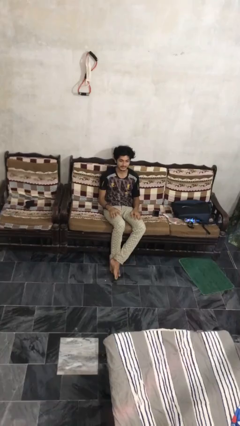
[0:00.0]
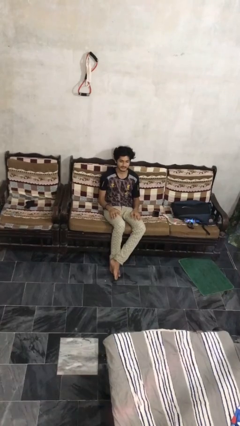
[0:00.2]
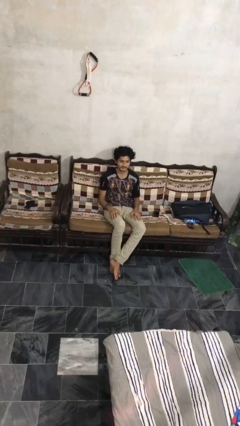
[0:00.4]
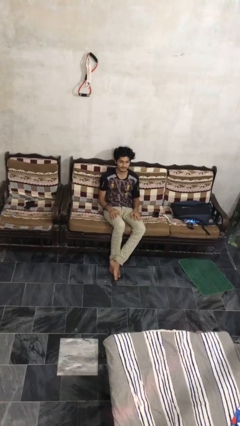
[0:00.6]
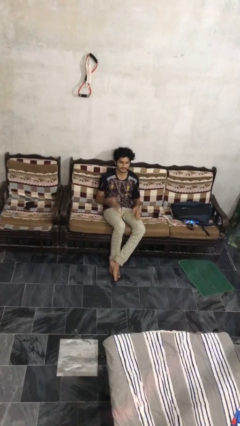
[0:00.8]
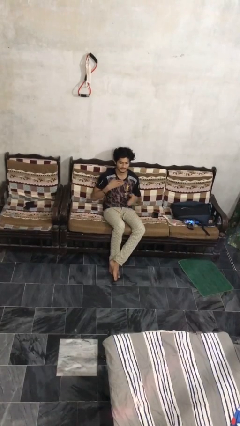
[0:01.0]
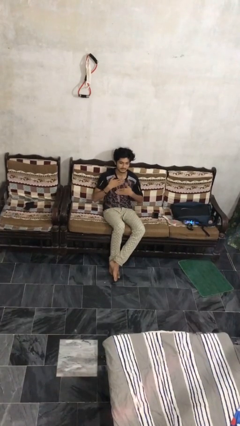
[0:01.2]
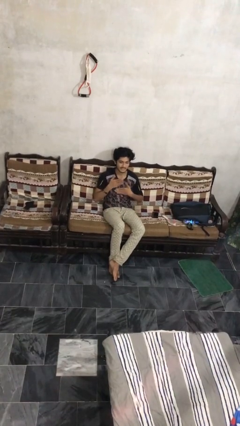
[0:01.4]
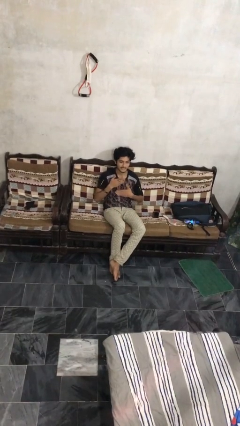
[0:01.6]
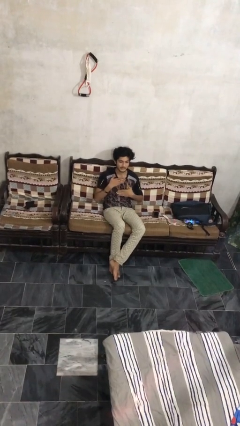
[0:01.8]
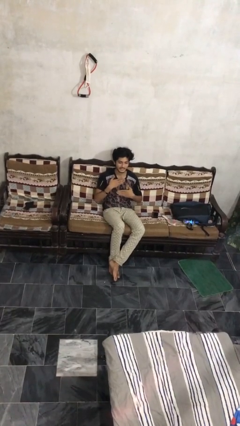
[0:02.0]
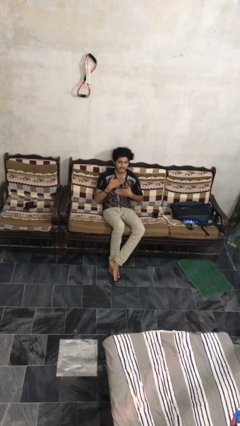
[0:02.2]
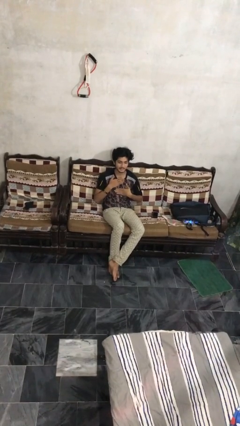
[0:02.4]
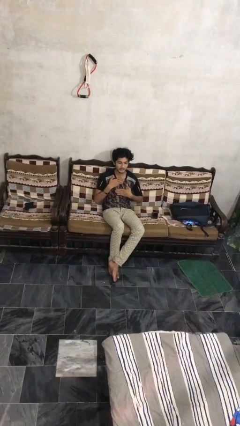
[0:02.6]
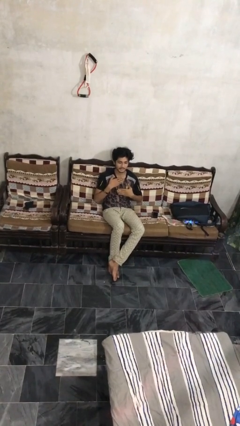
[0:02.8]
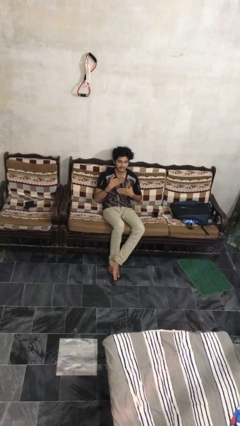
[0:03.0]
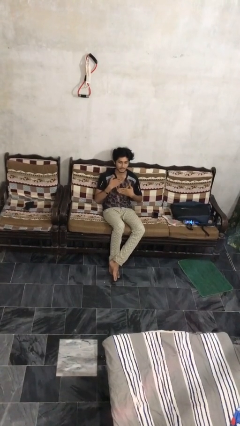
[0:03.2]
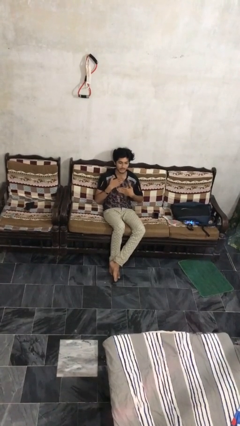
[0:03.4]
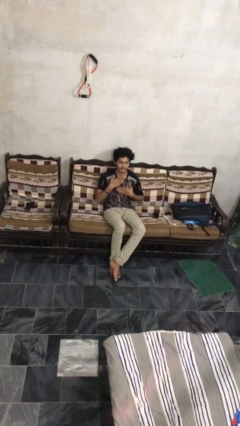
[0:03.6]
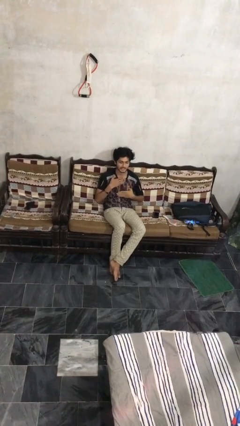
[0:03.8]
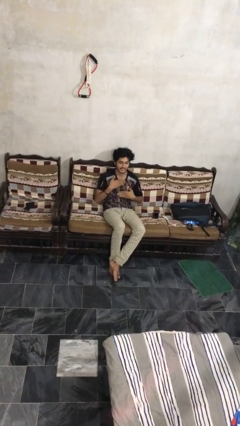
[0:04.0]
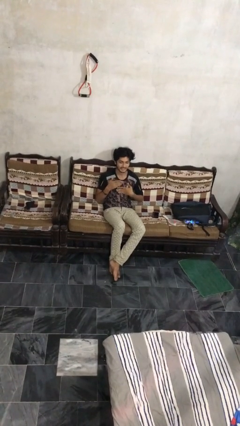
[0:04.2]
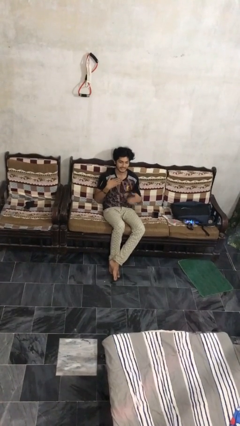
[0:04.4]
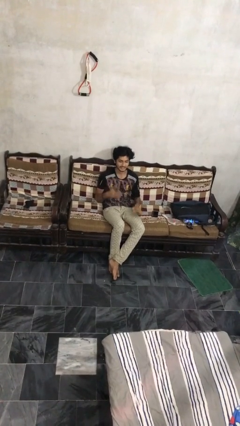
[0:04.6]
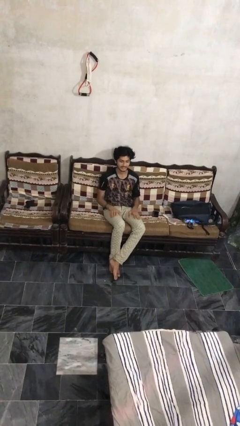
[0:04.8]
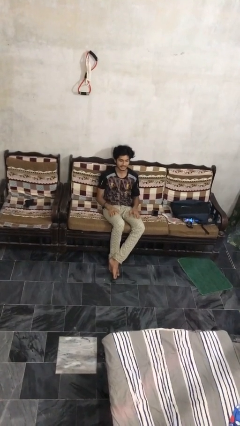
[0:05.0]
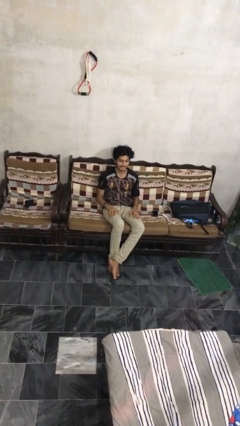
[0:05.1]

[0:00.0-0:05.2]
person drums on chest

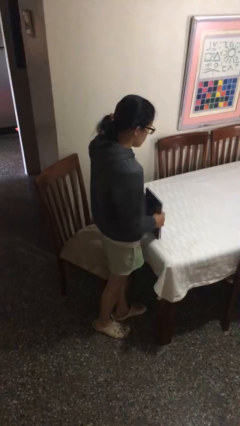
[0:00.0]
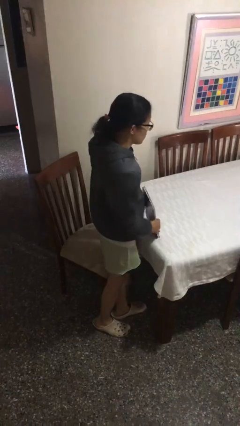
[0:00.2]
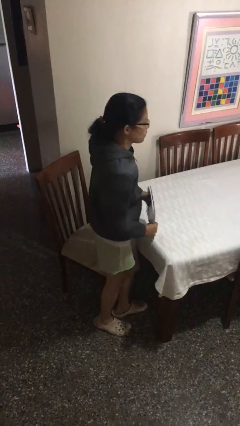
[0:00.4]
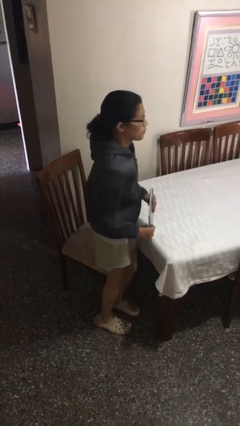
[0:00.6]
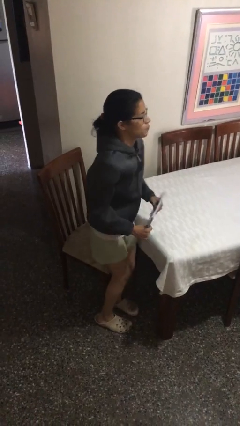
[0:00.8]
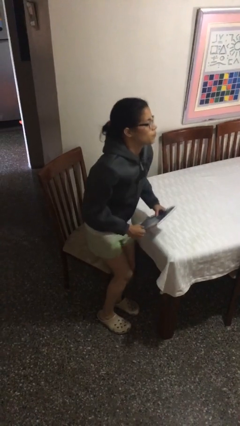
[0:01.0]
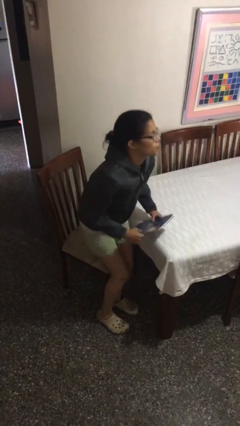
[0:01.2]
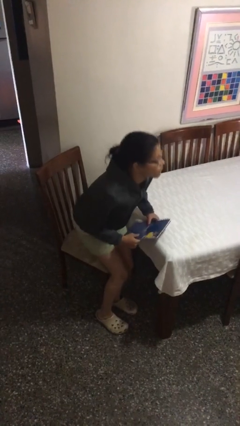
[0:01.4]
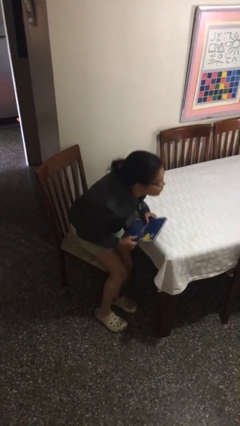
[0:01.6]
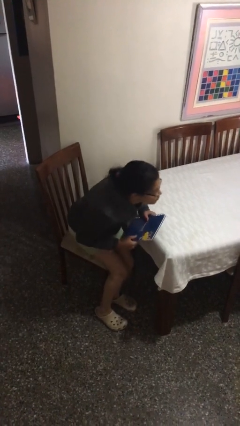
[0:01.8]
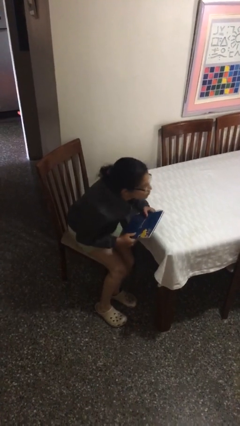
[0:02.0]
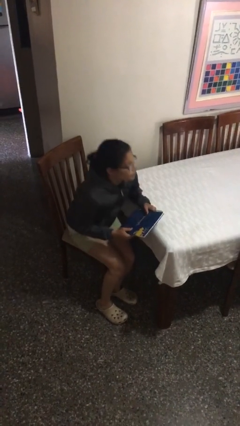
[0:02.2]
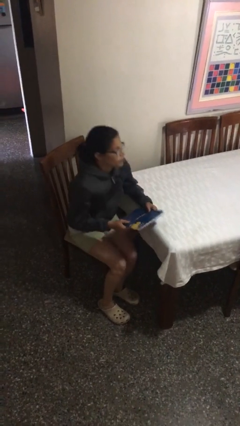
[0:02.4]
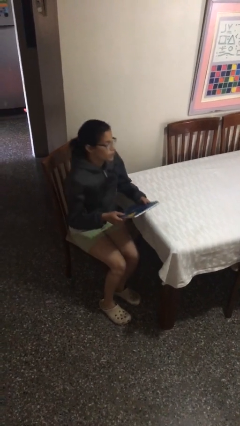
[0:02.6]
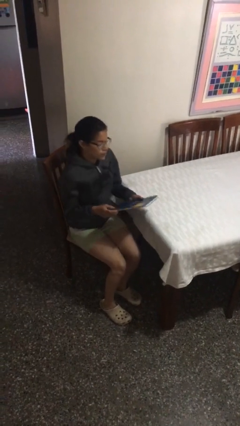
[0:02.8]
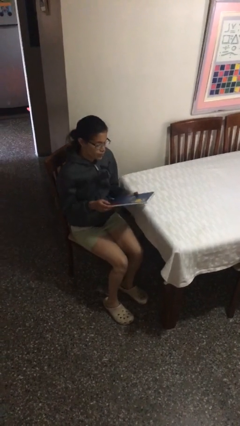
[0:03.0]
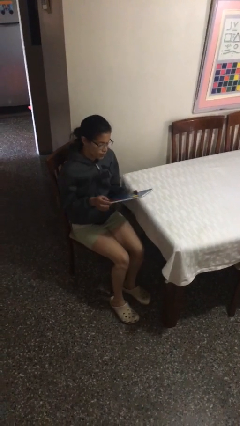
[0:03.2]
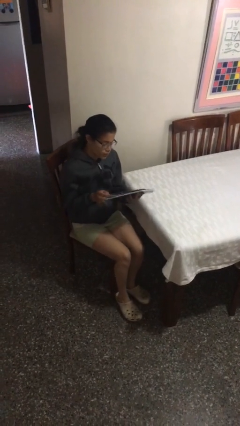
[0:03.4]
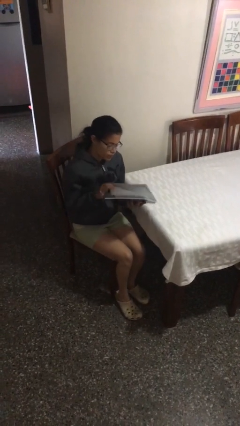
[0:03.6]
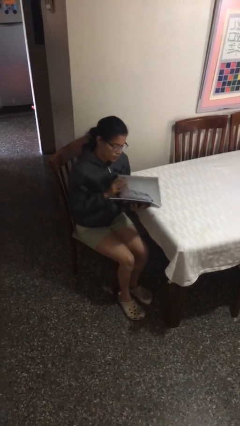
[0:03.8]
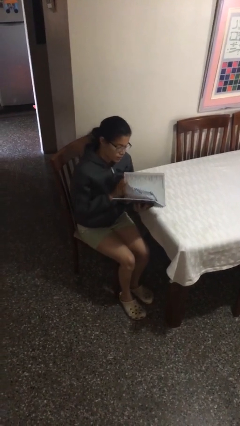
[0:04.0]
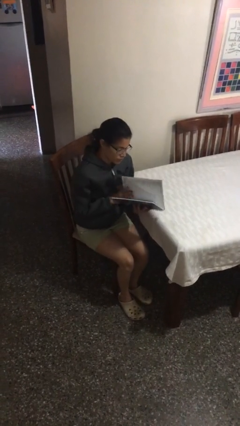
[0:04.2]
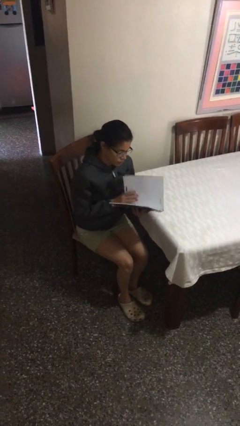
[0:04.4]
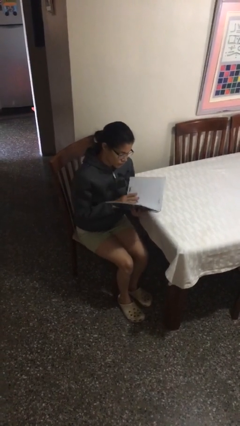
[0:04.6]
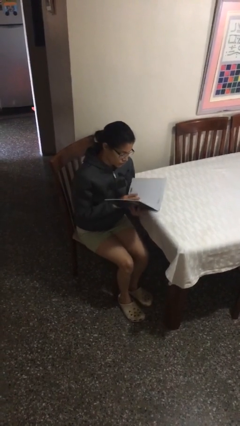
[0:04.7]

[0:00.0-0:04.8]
person sits down

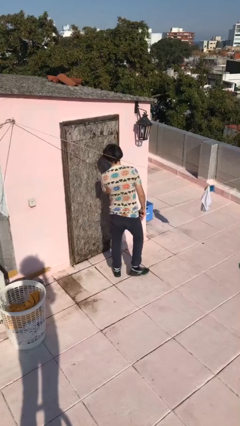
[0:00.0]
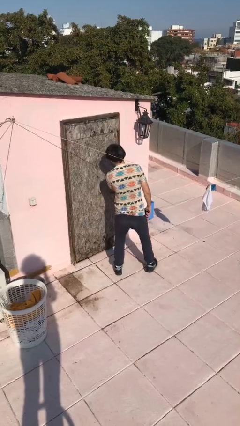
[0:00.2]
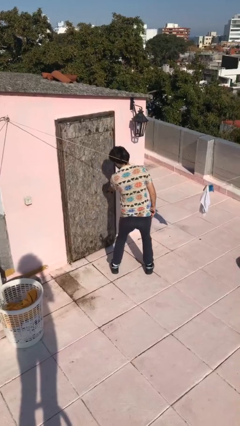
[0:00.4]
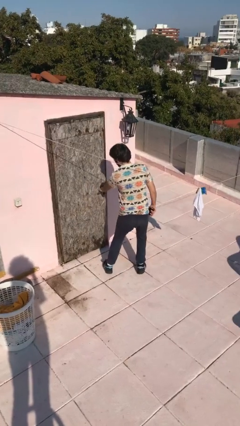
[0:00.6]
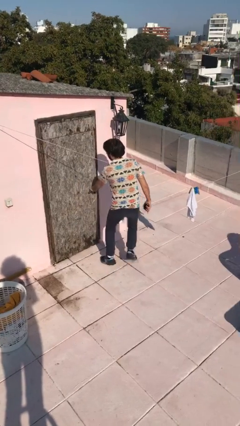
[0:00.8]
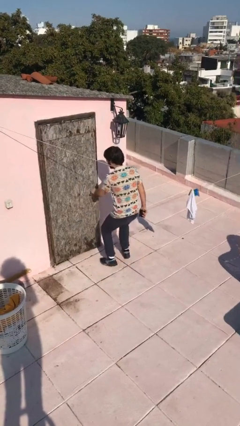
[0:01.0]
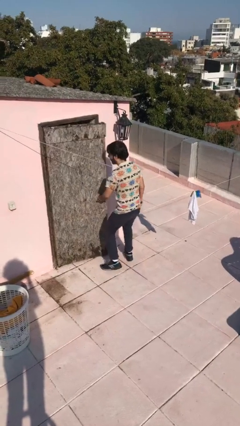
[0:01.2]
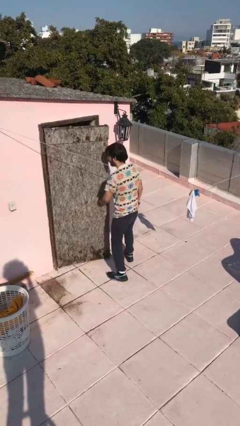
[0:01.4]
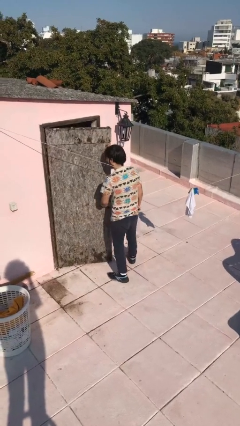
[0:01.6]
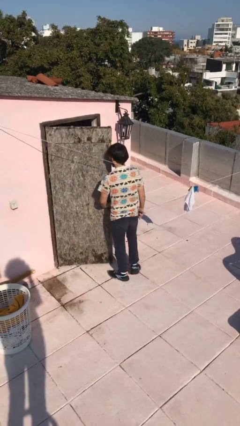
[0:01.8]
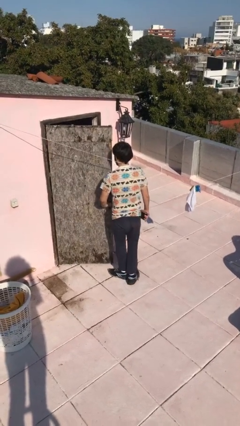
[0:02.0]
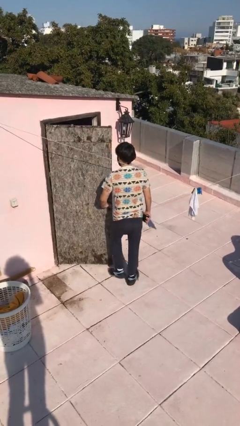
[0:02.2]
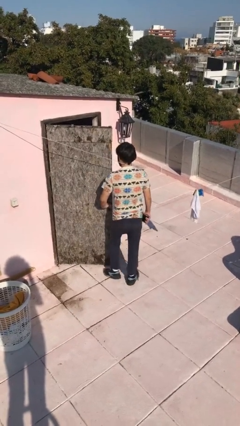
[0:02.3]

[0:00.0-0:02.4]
person opens facility door

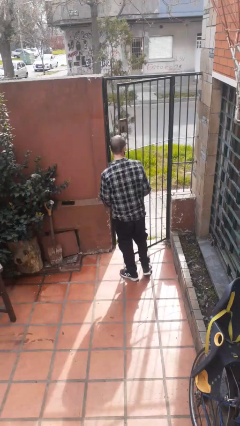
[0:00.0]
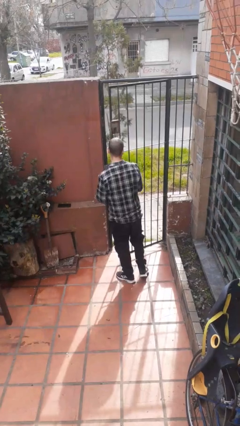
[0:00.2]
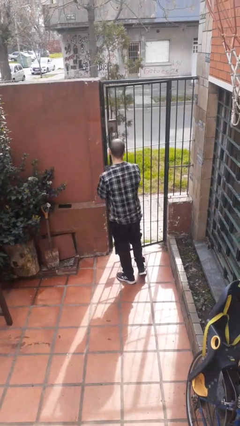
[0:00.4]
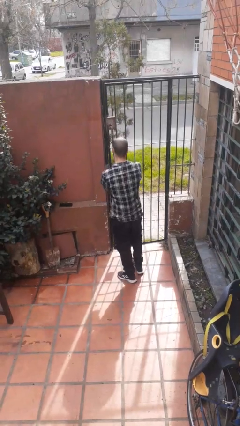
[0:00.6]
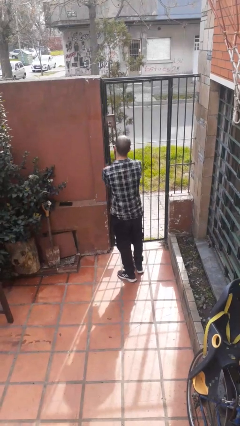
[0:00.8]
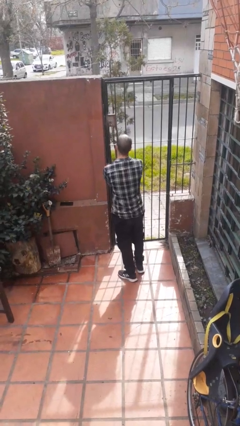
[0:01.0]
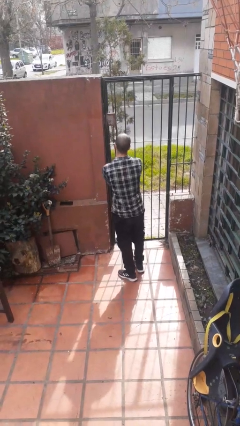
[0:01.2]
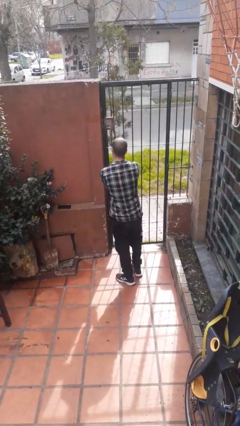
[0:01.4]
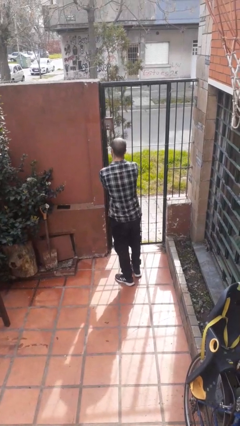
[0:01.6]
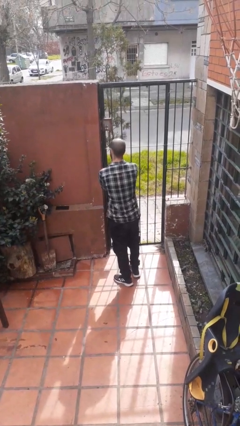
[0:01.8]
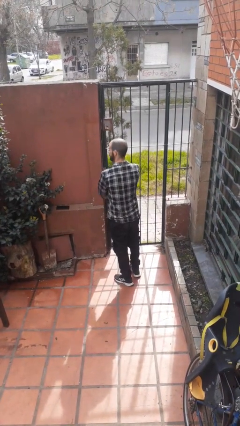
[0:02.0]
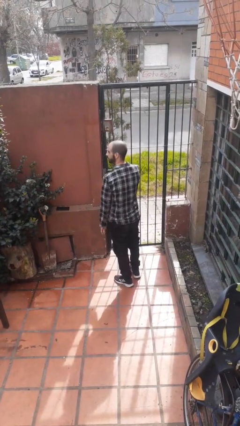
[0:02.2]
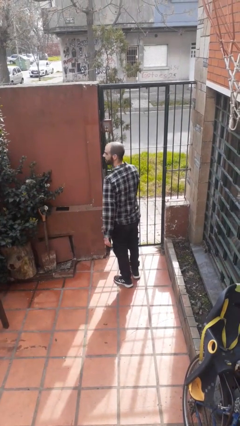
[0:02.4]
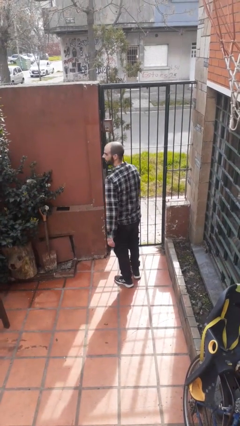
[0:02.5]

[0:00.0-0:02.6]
person closes gate

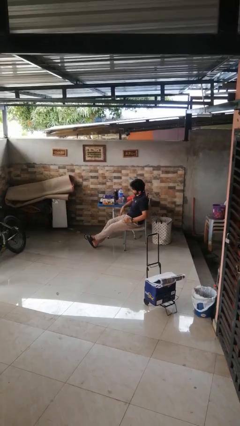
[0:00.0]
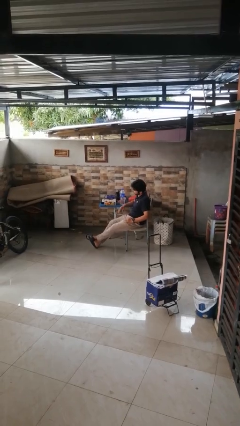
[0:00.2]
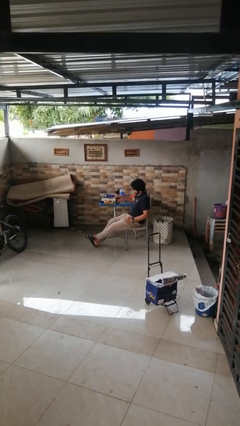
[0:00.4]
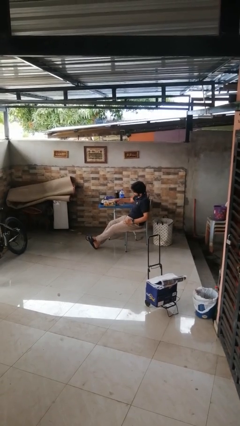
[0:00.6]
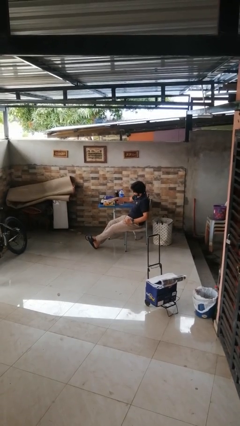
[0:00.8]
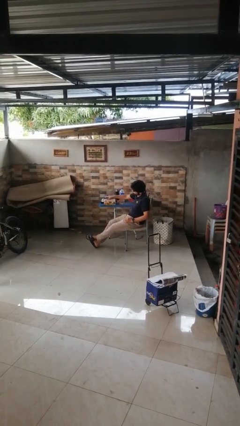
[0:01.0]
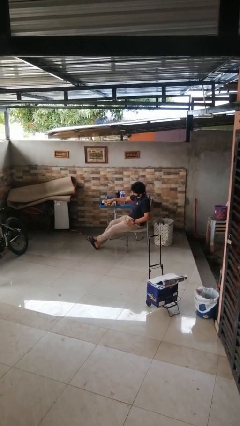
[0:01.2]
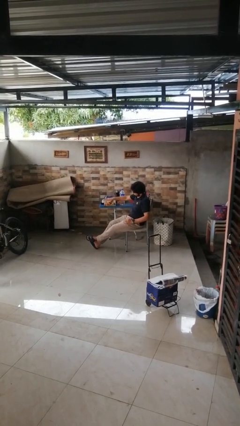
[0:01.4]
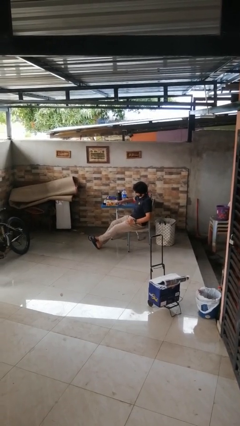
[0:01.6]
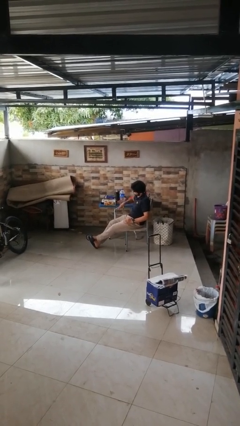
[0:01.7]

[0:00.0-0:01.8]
person taps object with finger

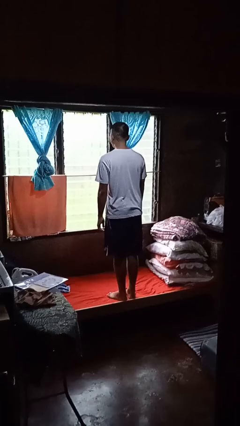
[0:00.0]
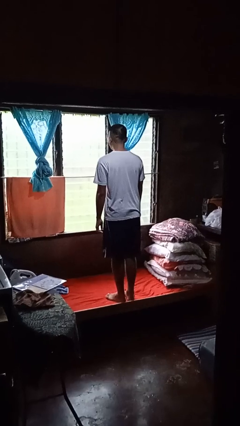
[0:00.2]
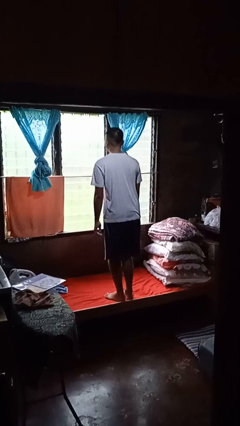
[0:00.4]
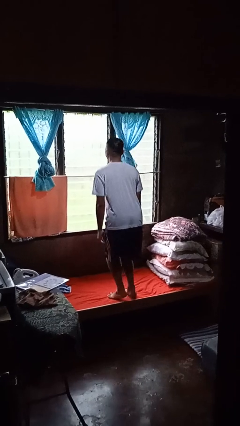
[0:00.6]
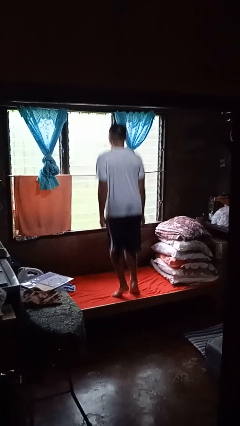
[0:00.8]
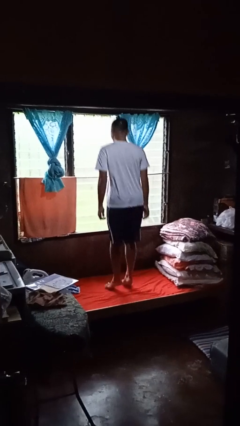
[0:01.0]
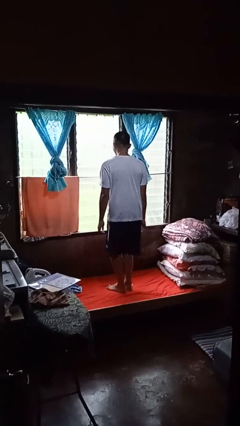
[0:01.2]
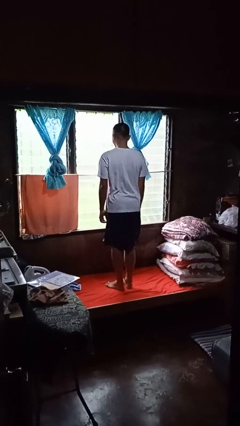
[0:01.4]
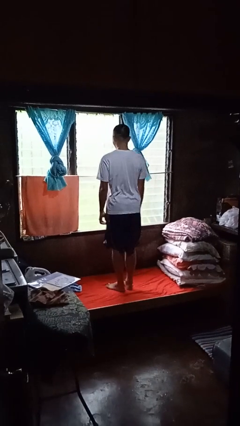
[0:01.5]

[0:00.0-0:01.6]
person jumps on bed
